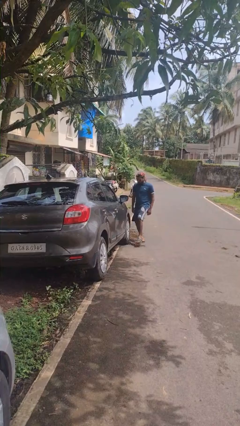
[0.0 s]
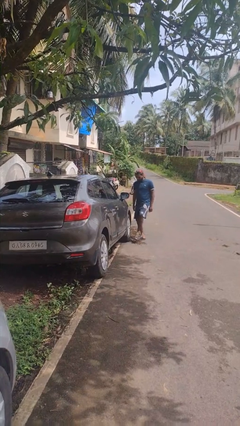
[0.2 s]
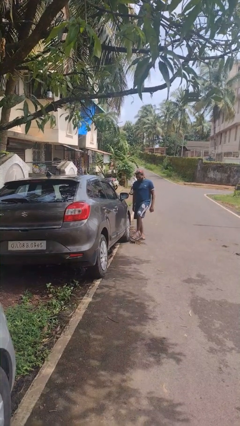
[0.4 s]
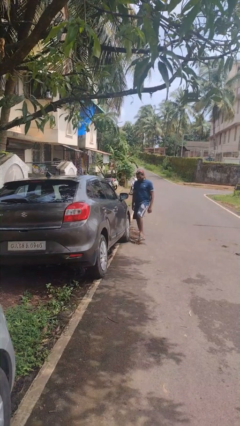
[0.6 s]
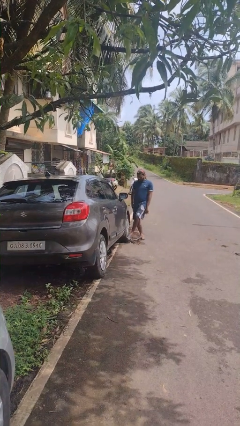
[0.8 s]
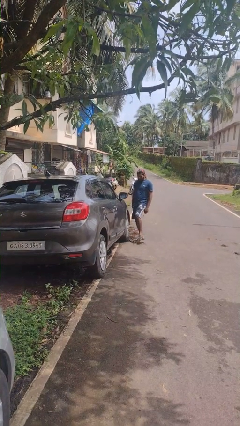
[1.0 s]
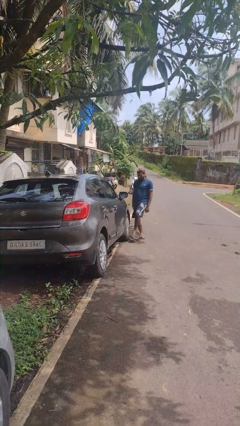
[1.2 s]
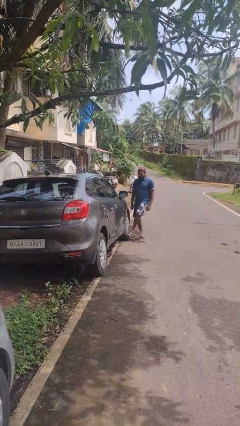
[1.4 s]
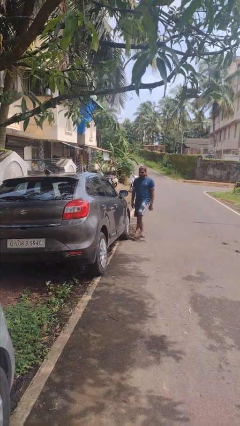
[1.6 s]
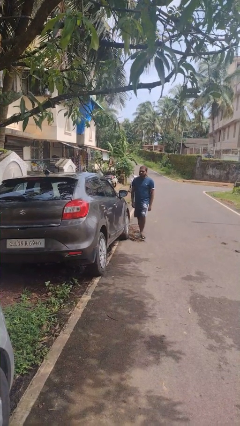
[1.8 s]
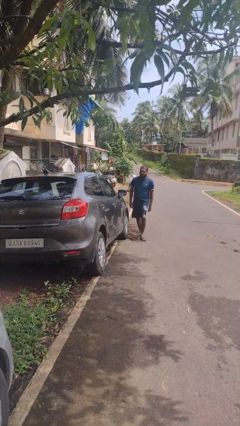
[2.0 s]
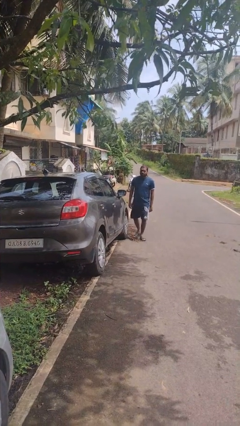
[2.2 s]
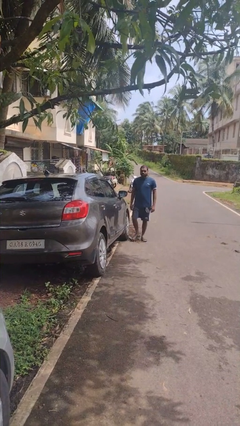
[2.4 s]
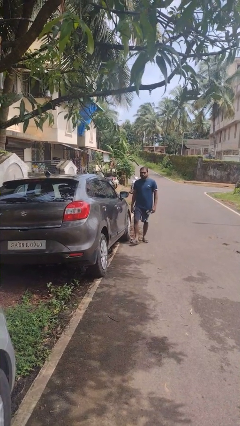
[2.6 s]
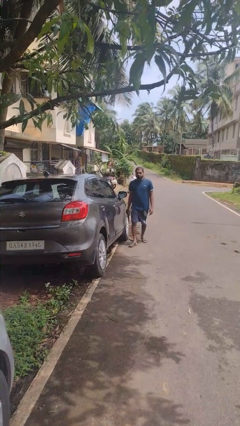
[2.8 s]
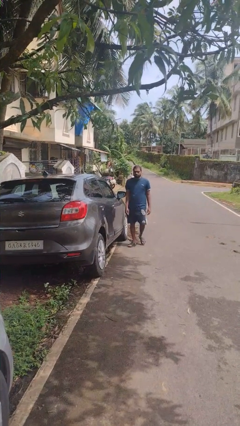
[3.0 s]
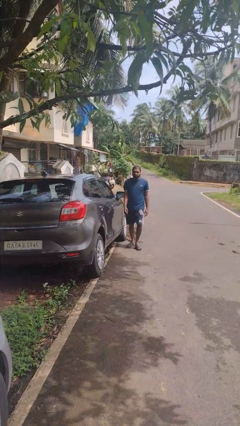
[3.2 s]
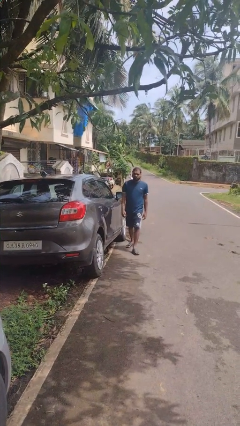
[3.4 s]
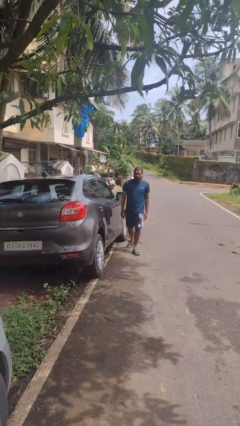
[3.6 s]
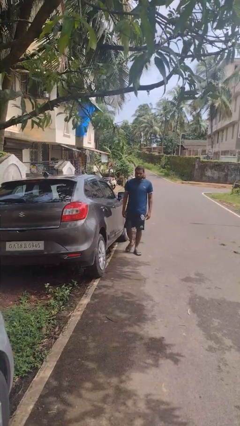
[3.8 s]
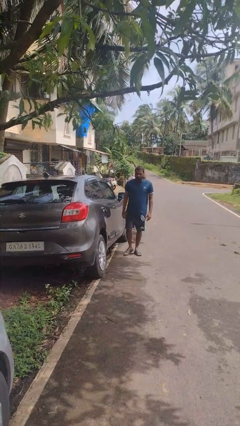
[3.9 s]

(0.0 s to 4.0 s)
person kicks car tires

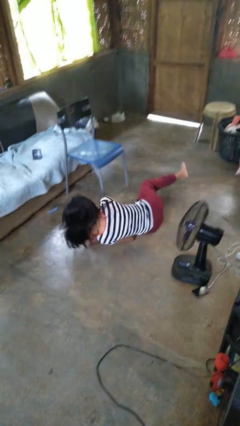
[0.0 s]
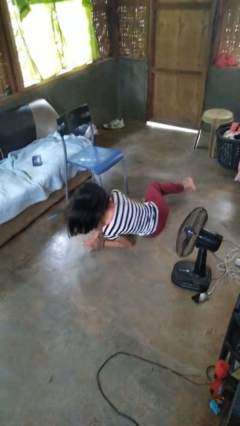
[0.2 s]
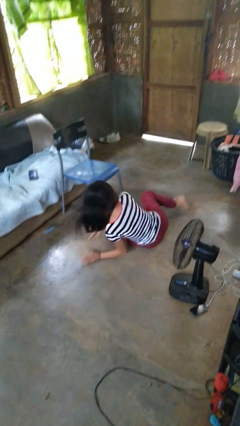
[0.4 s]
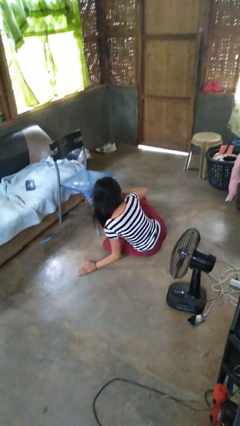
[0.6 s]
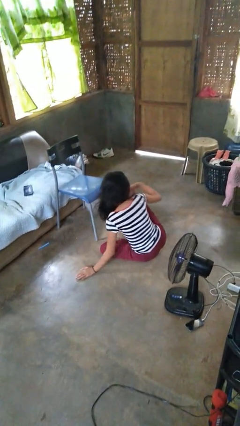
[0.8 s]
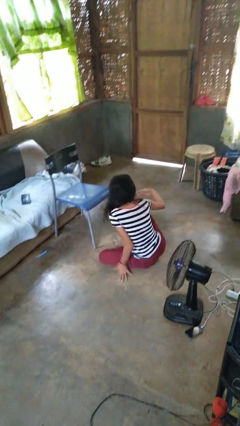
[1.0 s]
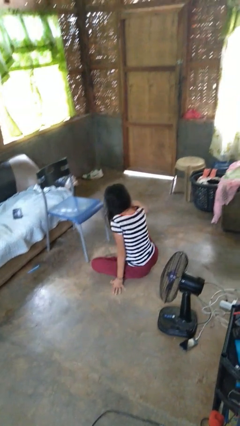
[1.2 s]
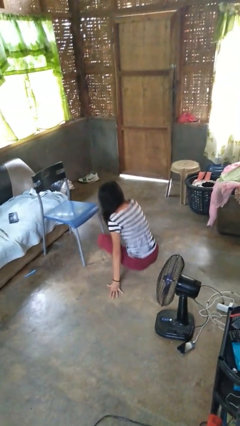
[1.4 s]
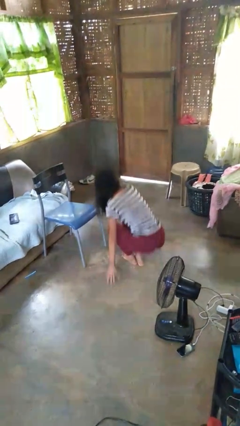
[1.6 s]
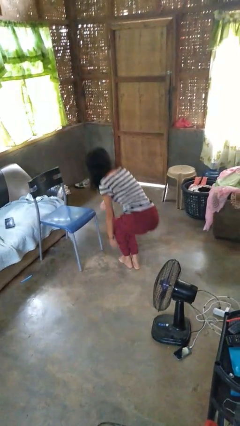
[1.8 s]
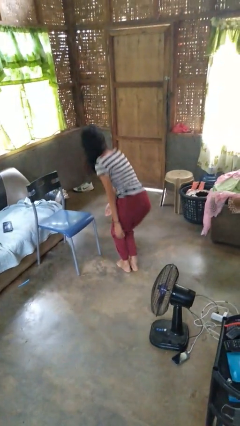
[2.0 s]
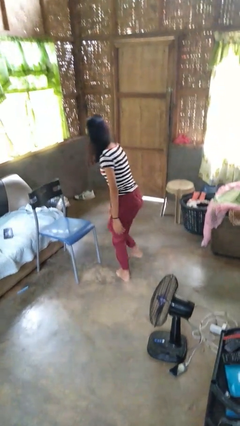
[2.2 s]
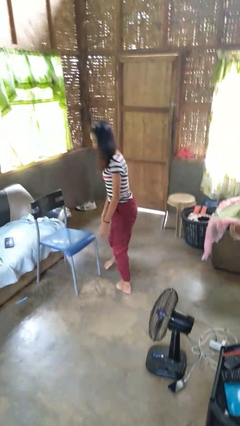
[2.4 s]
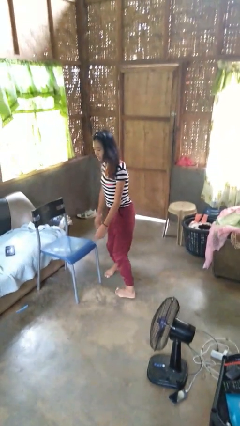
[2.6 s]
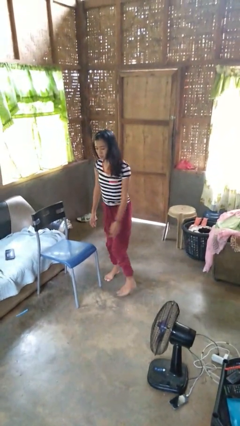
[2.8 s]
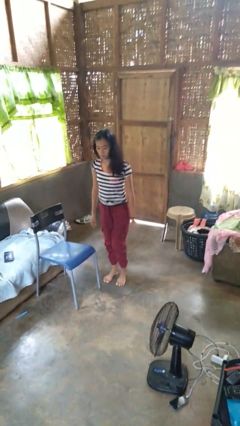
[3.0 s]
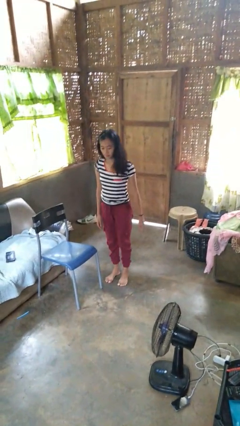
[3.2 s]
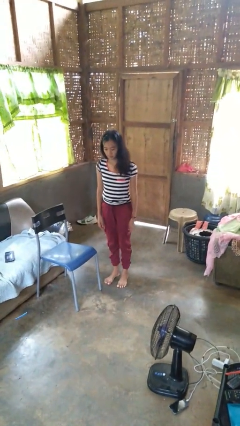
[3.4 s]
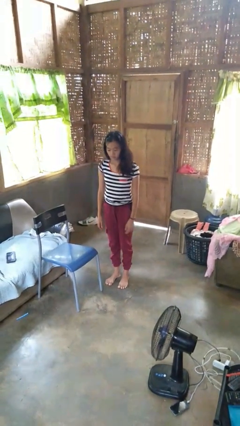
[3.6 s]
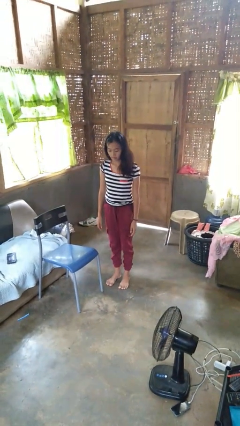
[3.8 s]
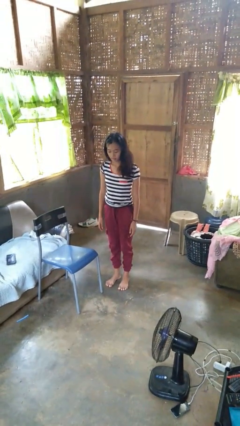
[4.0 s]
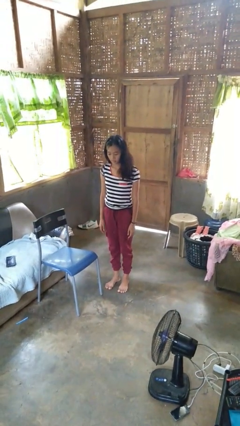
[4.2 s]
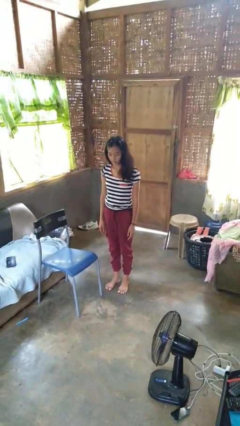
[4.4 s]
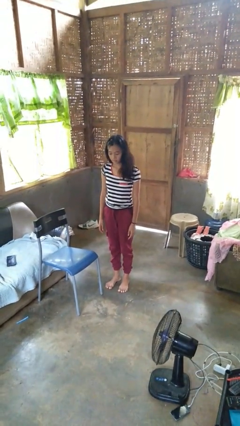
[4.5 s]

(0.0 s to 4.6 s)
person stands up from floor

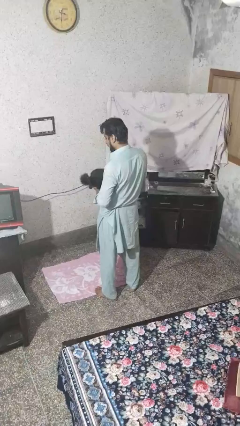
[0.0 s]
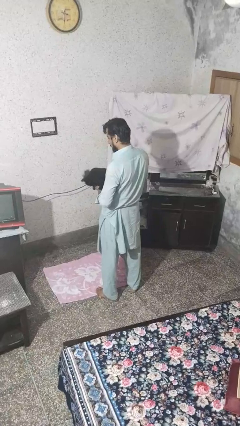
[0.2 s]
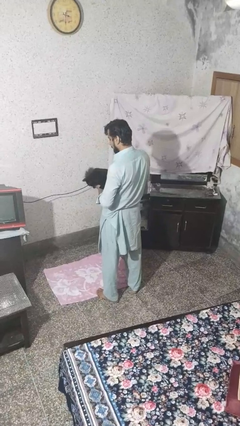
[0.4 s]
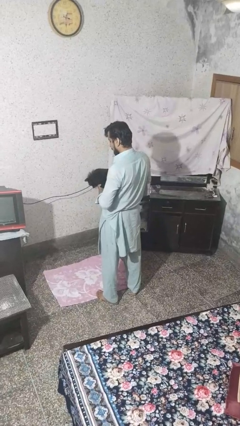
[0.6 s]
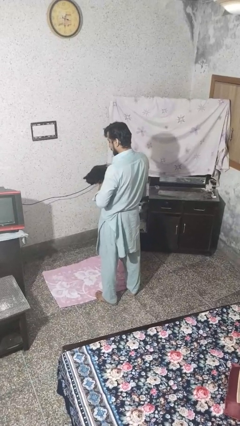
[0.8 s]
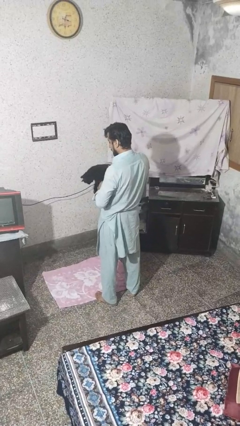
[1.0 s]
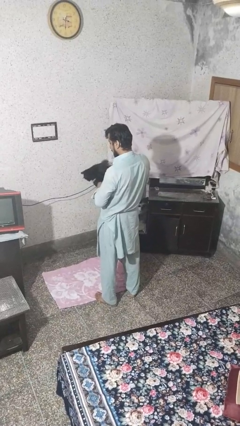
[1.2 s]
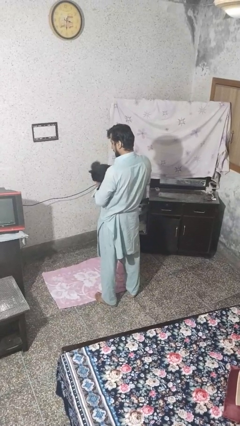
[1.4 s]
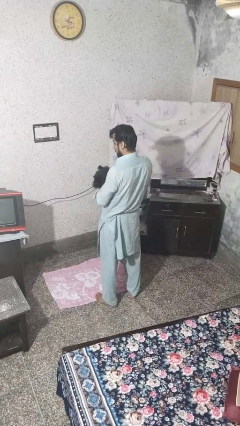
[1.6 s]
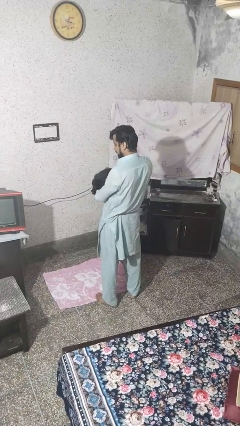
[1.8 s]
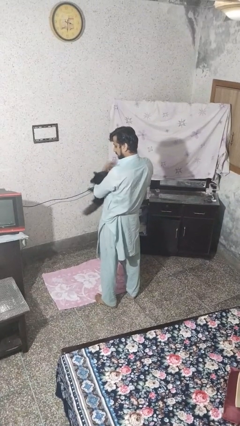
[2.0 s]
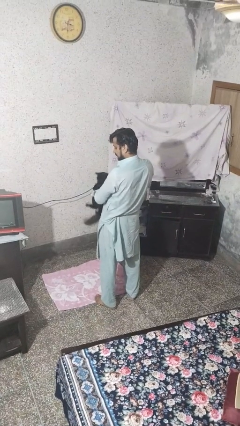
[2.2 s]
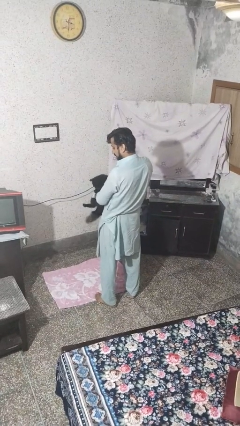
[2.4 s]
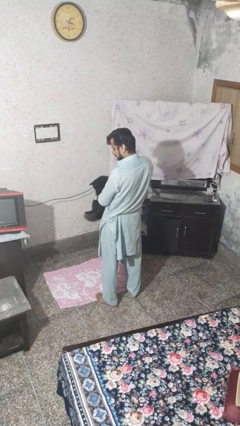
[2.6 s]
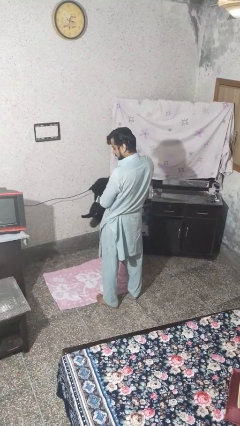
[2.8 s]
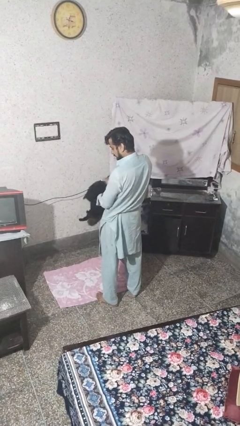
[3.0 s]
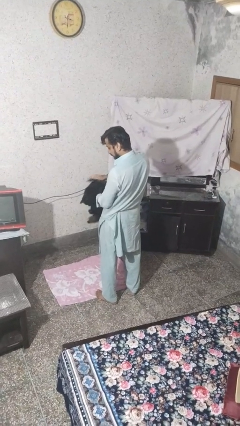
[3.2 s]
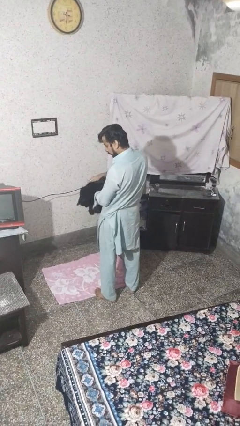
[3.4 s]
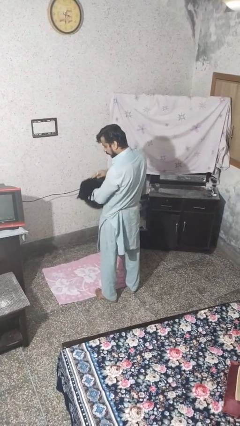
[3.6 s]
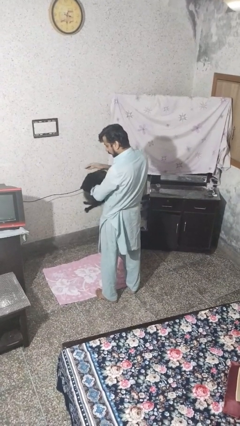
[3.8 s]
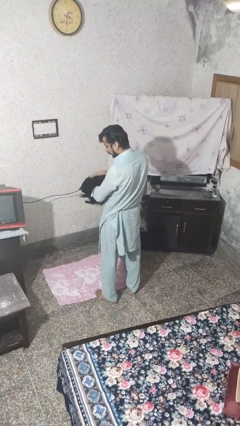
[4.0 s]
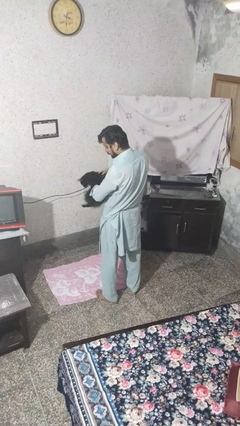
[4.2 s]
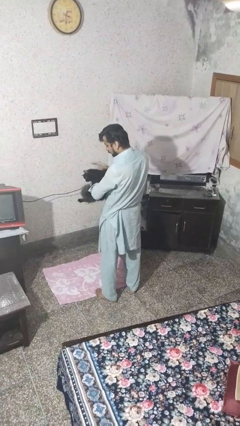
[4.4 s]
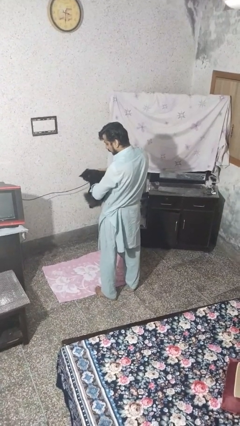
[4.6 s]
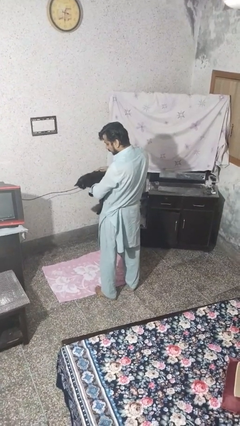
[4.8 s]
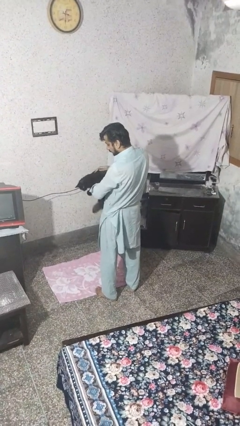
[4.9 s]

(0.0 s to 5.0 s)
person pets cat

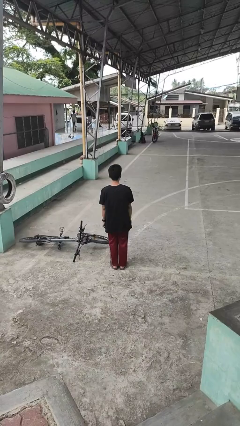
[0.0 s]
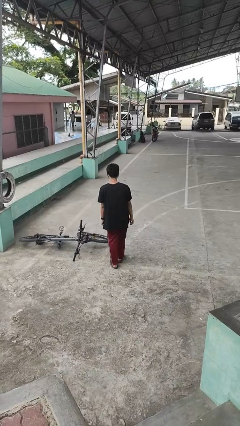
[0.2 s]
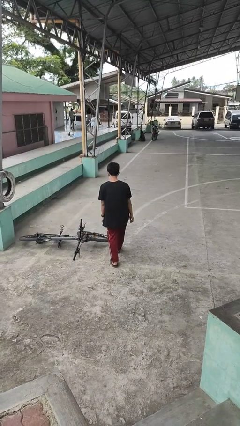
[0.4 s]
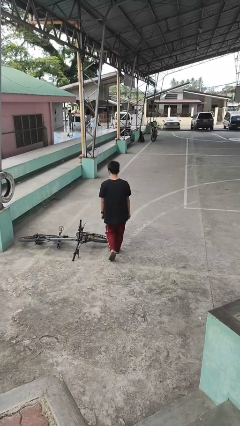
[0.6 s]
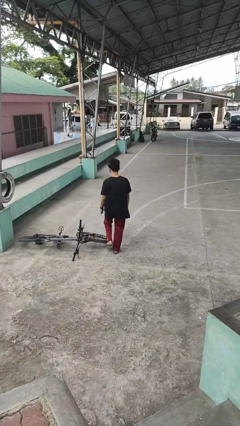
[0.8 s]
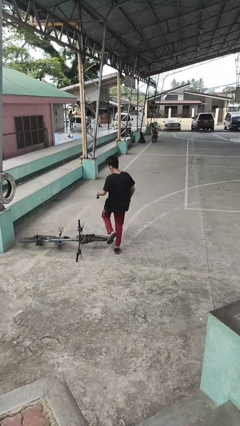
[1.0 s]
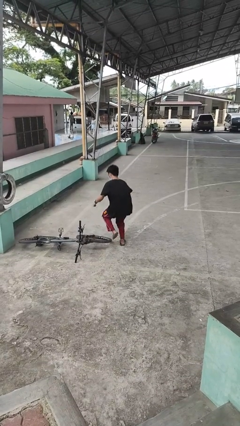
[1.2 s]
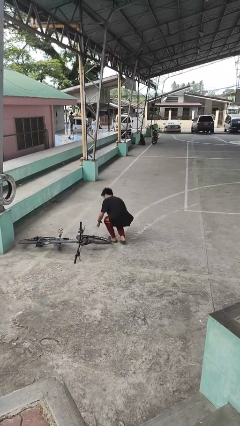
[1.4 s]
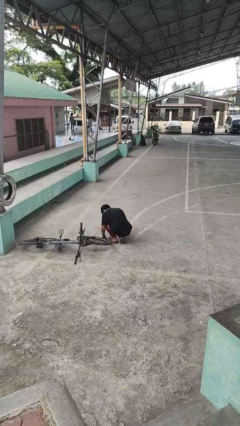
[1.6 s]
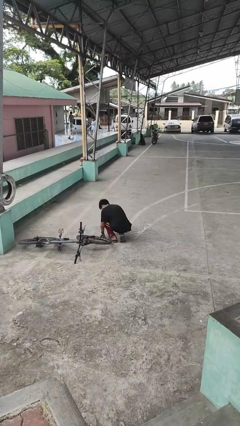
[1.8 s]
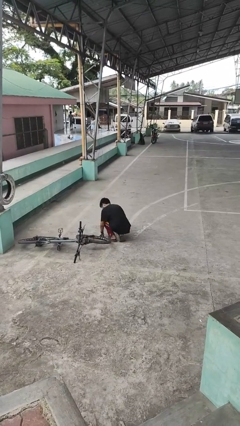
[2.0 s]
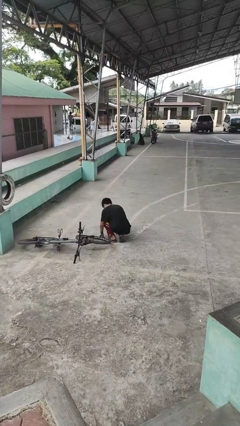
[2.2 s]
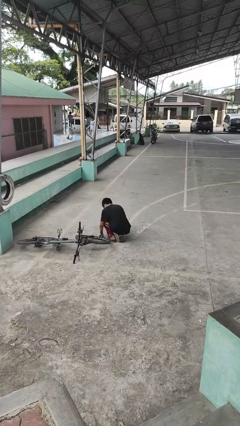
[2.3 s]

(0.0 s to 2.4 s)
person trips on object on floor

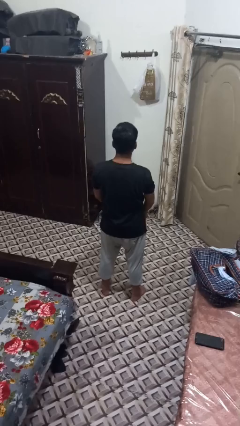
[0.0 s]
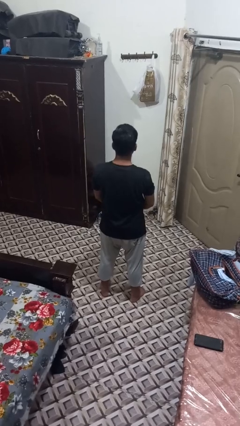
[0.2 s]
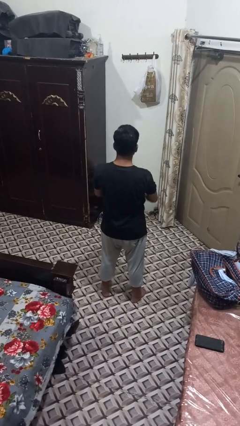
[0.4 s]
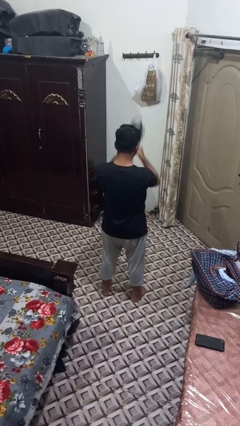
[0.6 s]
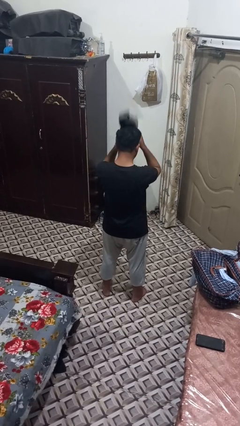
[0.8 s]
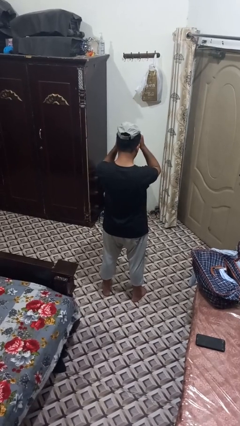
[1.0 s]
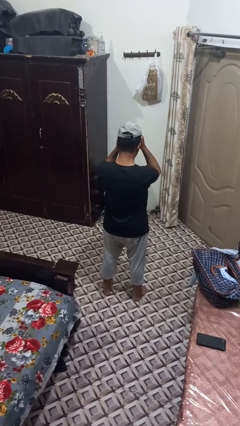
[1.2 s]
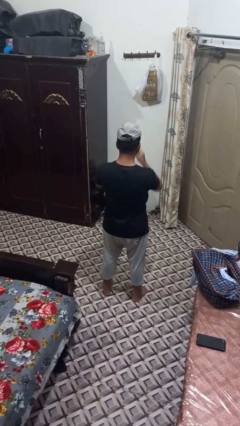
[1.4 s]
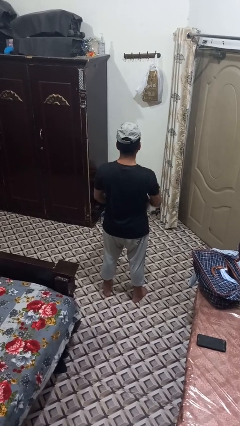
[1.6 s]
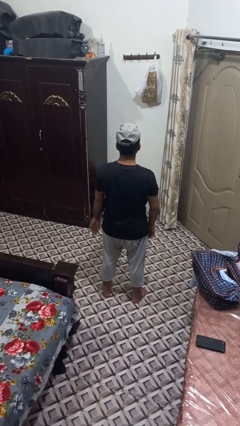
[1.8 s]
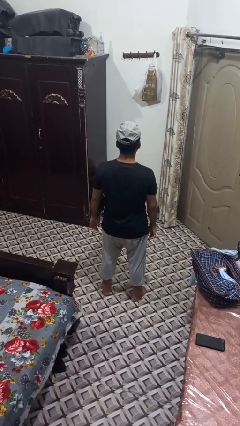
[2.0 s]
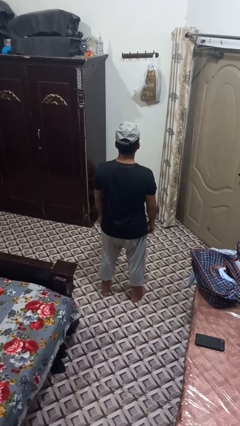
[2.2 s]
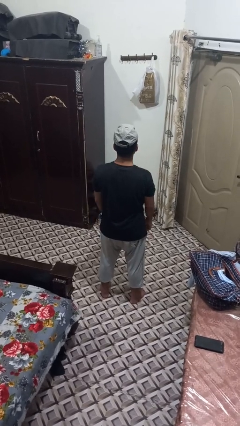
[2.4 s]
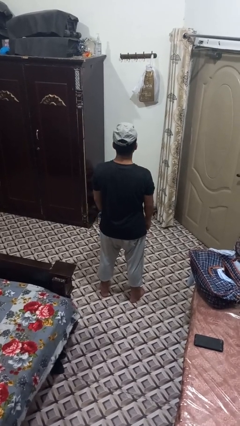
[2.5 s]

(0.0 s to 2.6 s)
person puts on hat
